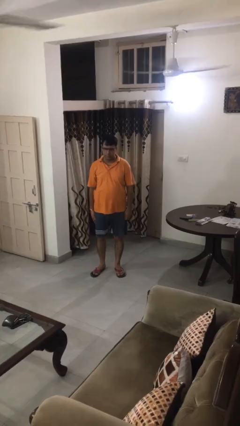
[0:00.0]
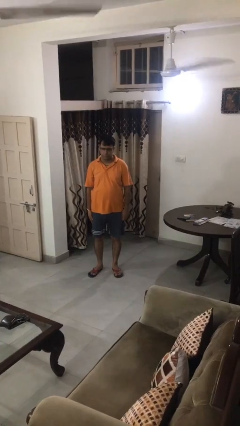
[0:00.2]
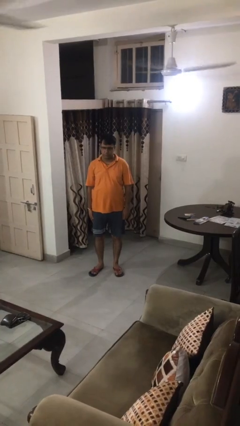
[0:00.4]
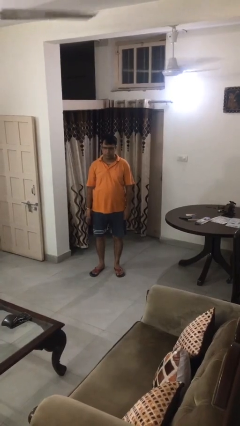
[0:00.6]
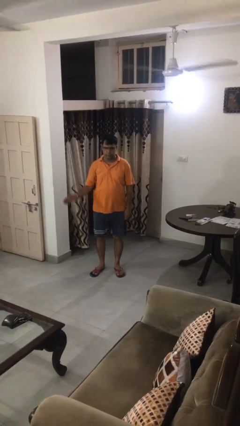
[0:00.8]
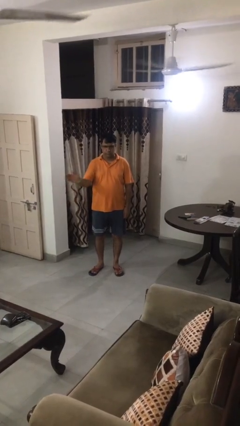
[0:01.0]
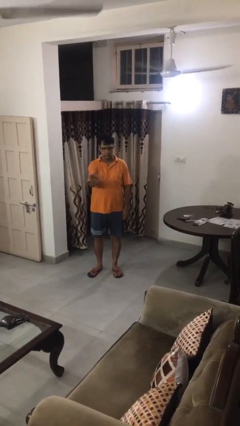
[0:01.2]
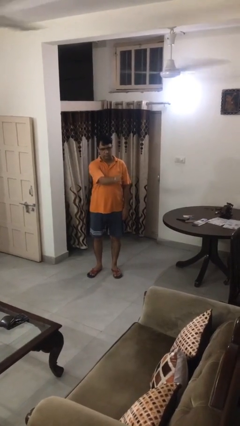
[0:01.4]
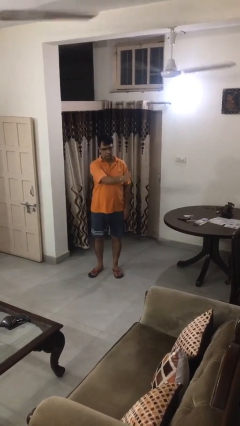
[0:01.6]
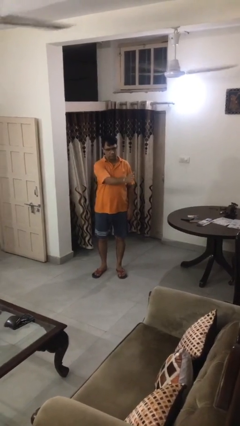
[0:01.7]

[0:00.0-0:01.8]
person gestures swipe left

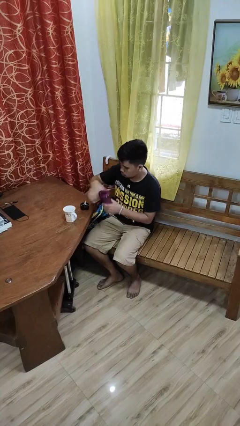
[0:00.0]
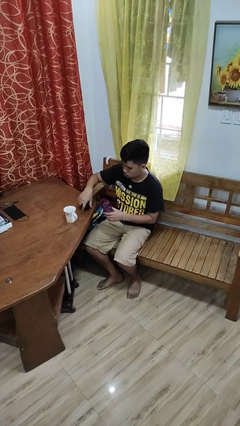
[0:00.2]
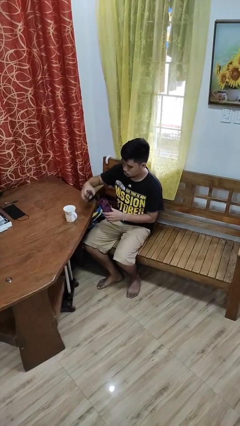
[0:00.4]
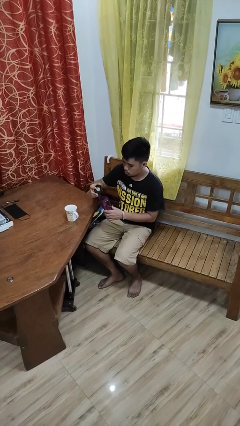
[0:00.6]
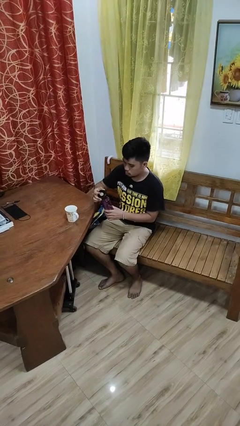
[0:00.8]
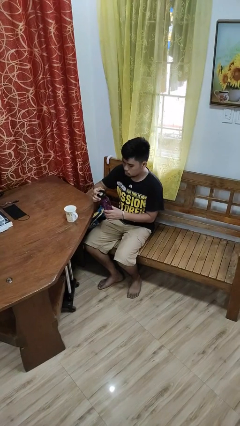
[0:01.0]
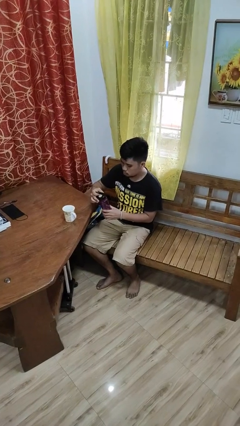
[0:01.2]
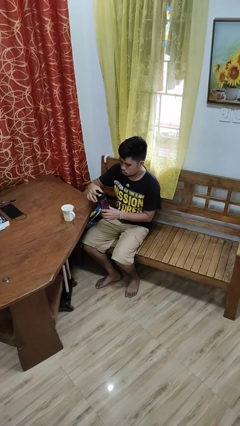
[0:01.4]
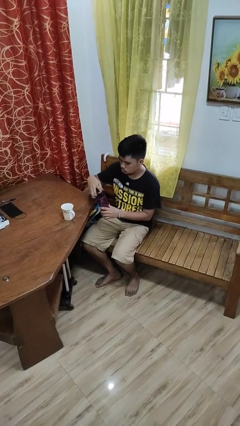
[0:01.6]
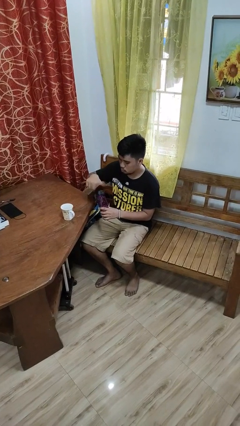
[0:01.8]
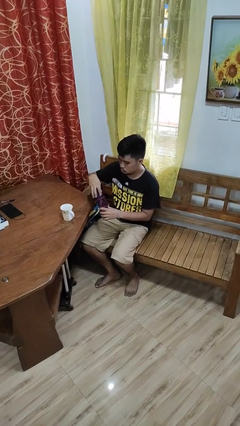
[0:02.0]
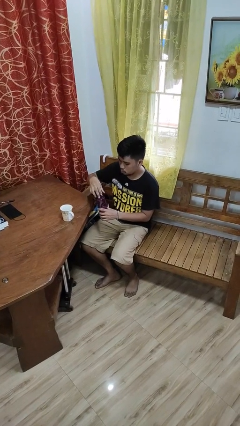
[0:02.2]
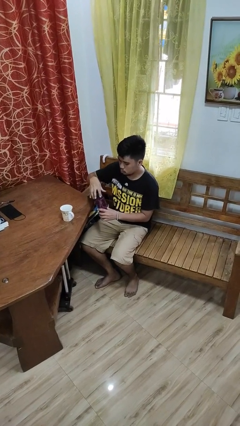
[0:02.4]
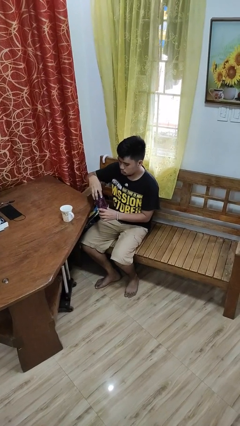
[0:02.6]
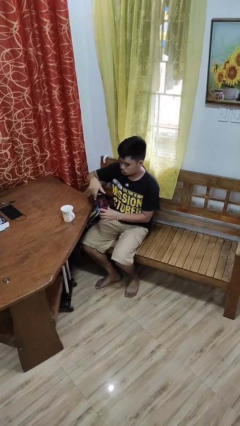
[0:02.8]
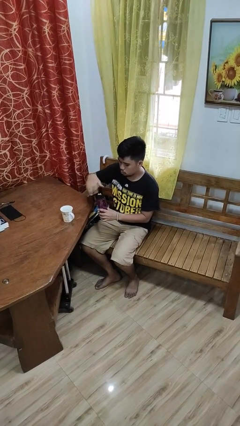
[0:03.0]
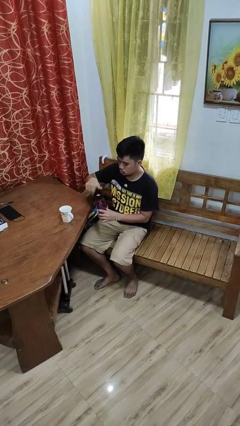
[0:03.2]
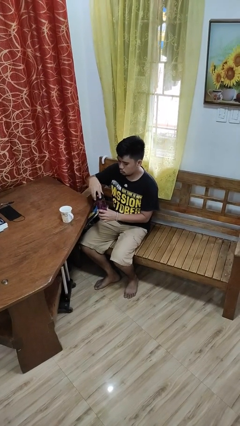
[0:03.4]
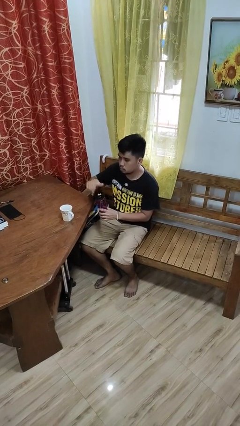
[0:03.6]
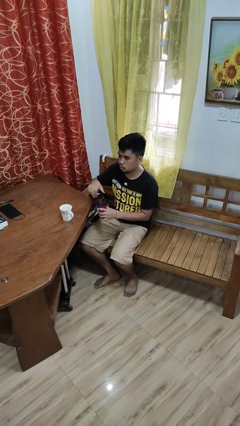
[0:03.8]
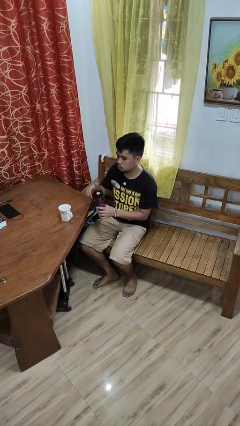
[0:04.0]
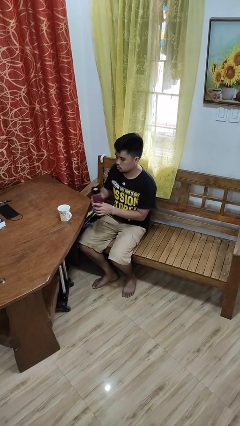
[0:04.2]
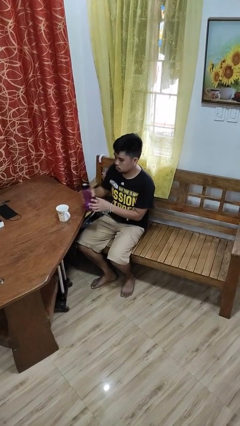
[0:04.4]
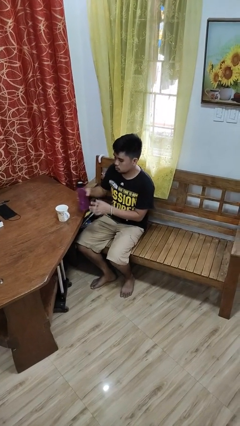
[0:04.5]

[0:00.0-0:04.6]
person screws lid to bottle

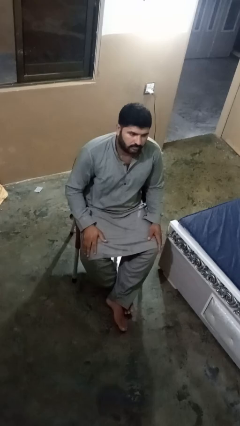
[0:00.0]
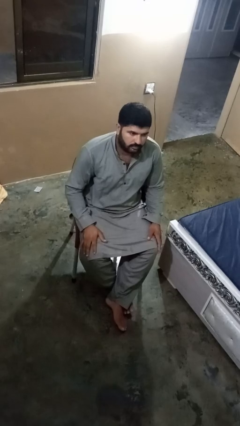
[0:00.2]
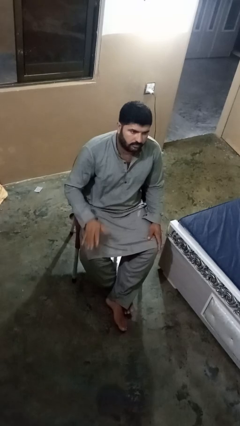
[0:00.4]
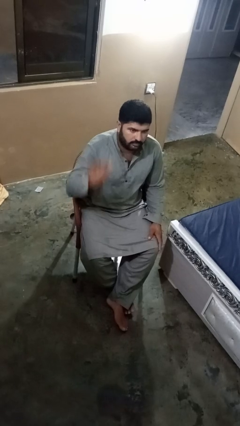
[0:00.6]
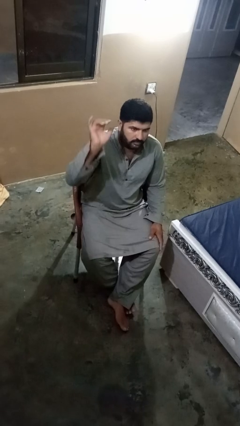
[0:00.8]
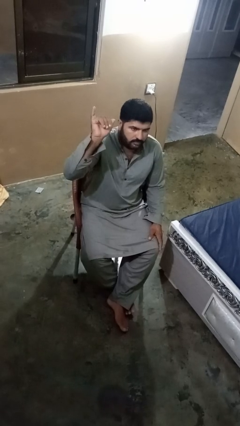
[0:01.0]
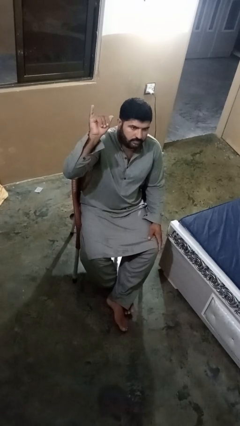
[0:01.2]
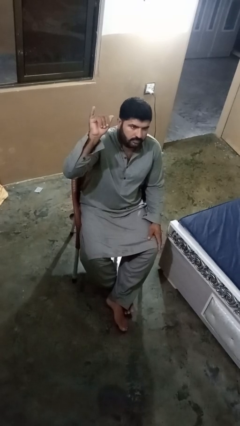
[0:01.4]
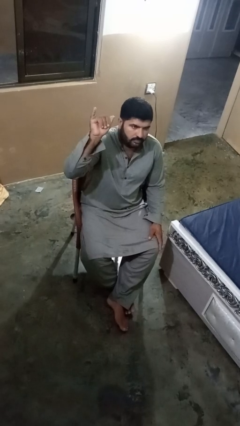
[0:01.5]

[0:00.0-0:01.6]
person gestures hang loose

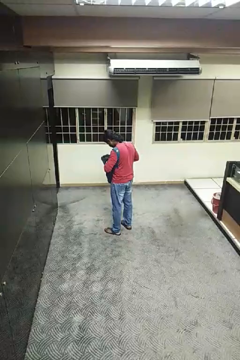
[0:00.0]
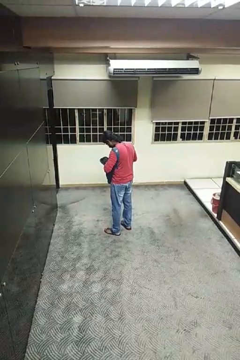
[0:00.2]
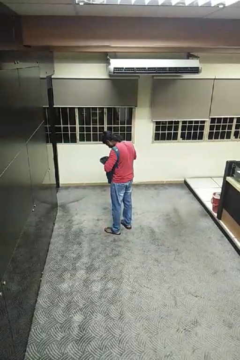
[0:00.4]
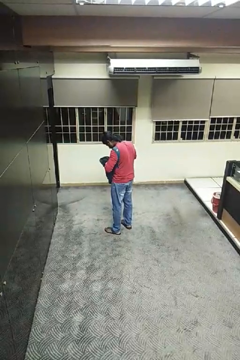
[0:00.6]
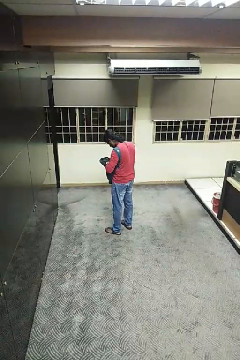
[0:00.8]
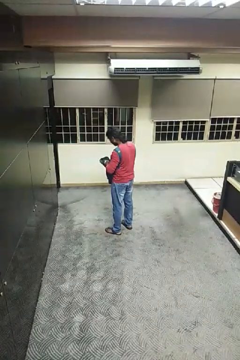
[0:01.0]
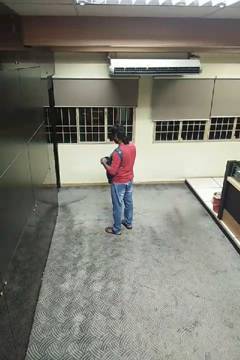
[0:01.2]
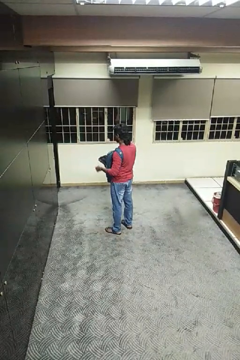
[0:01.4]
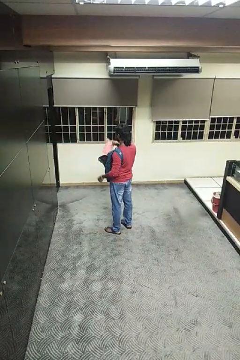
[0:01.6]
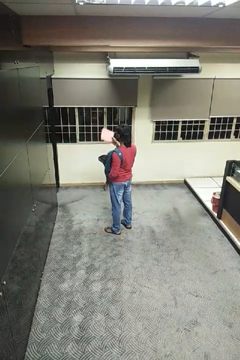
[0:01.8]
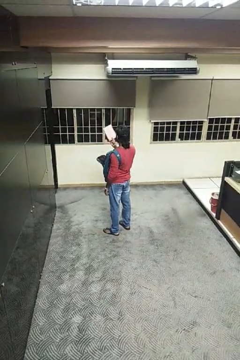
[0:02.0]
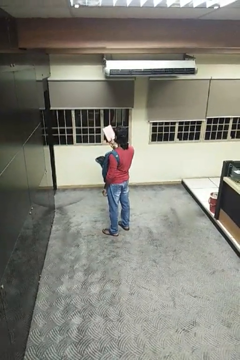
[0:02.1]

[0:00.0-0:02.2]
person takes object from backpack

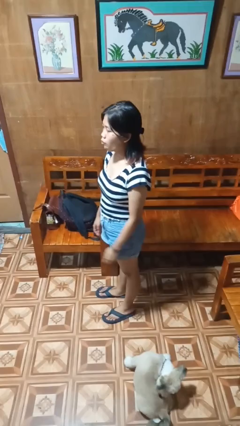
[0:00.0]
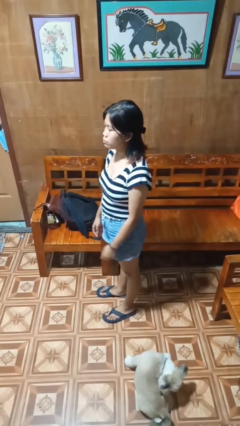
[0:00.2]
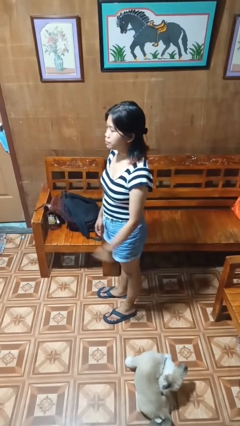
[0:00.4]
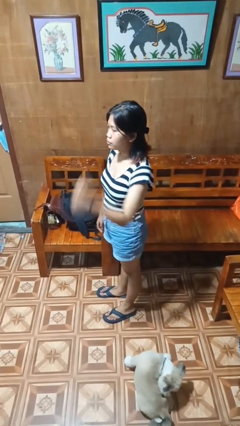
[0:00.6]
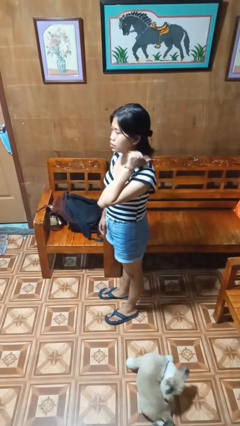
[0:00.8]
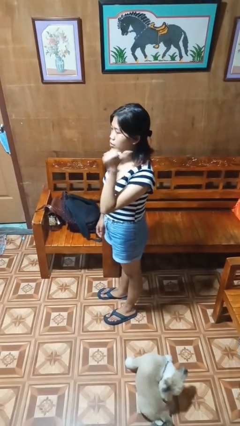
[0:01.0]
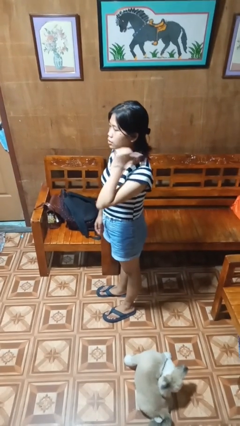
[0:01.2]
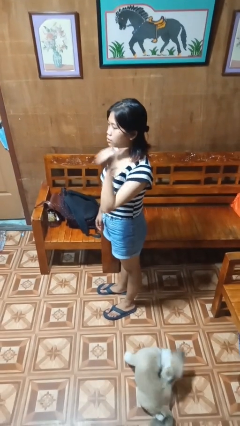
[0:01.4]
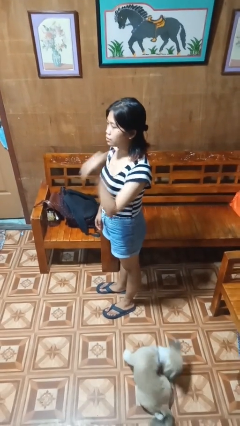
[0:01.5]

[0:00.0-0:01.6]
person gestures behind me

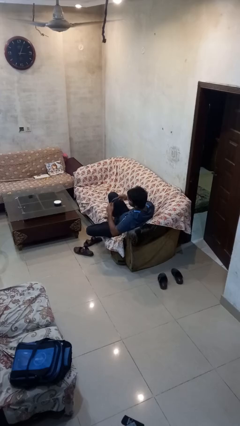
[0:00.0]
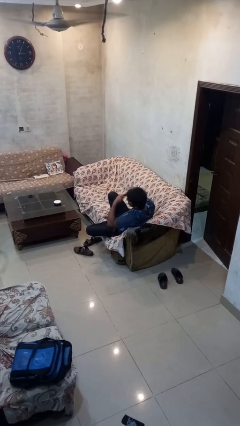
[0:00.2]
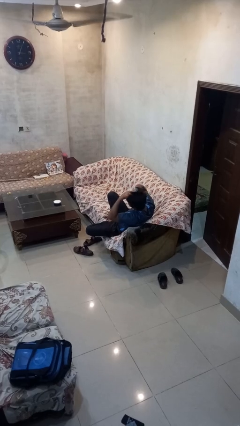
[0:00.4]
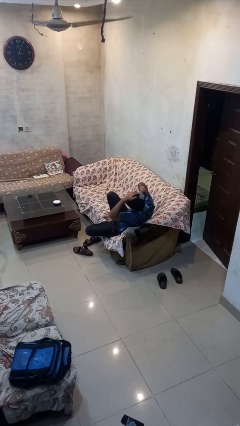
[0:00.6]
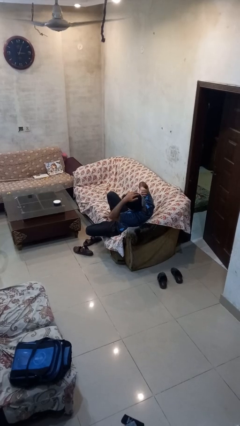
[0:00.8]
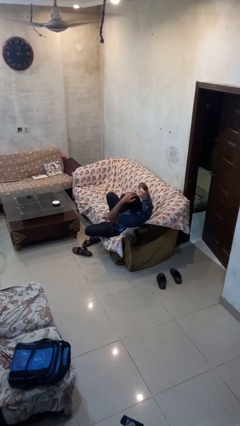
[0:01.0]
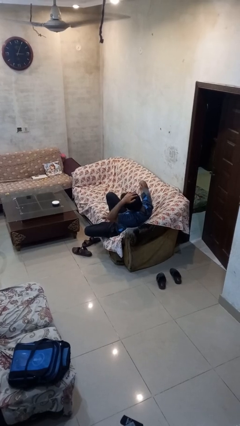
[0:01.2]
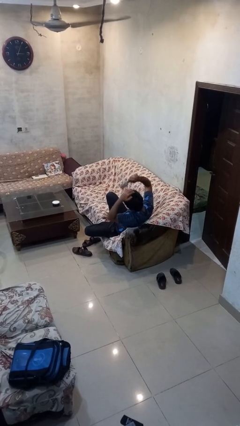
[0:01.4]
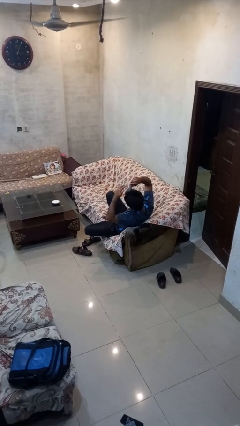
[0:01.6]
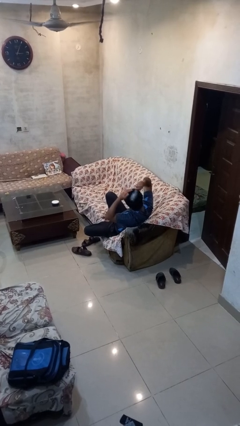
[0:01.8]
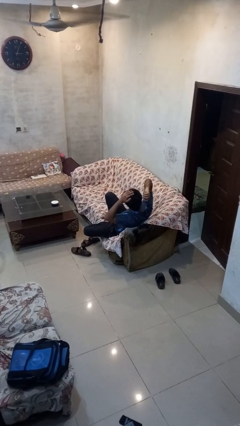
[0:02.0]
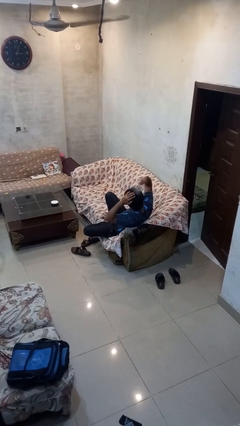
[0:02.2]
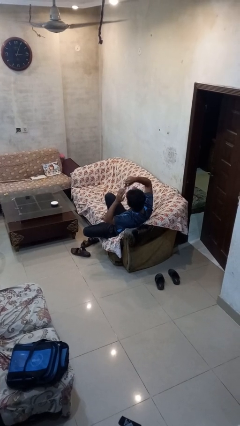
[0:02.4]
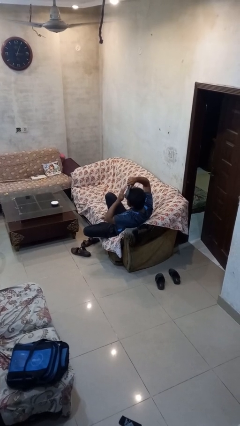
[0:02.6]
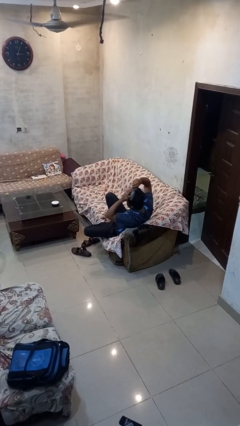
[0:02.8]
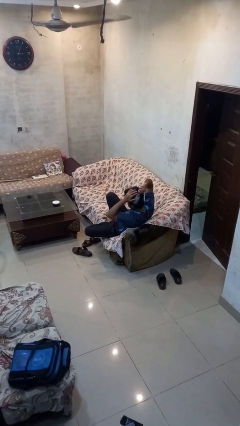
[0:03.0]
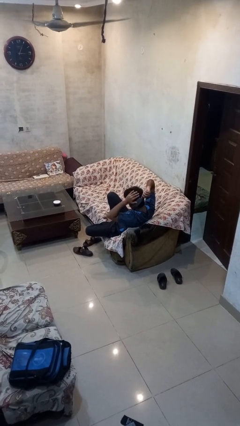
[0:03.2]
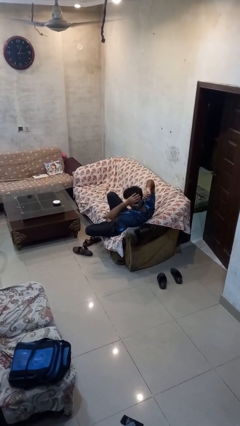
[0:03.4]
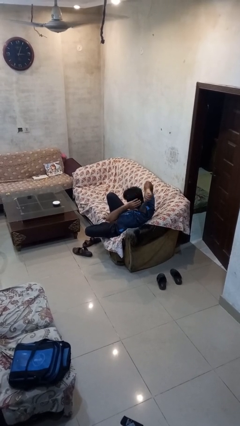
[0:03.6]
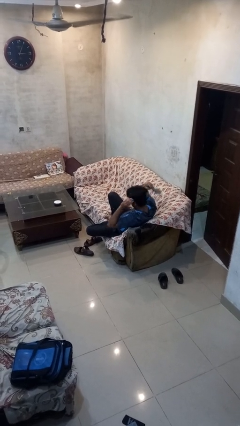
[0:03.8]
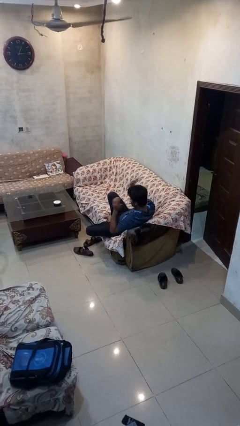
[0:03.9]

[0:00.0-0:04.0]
person brushes hair

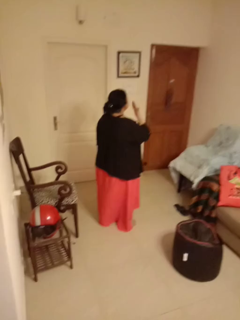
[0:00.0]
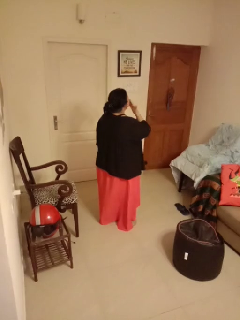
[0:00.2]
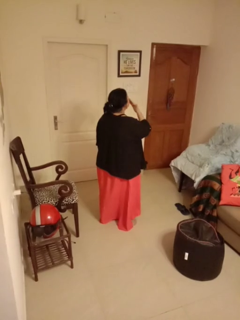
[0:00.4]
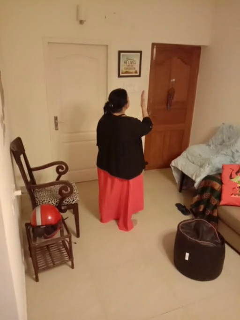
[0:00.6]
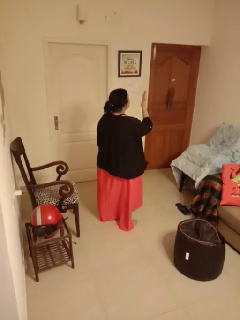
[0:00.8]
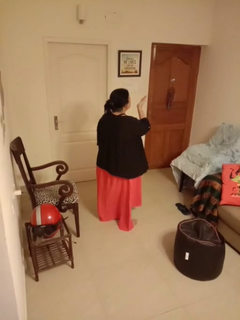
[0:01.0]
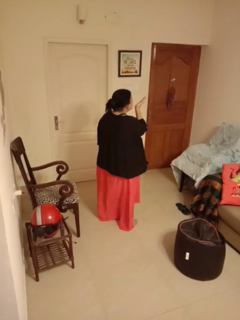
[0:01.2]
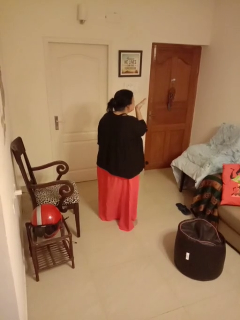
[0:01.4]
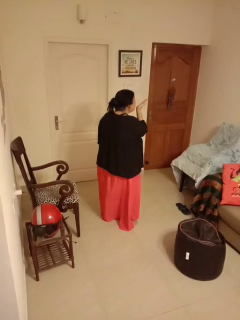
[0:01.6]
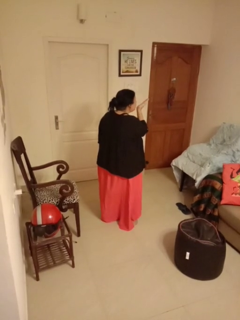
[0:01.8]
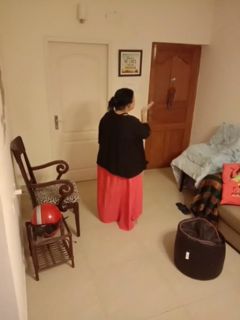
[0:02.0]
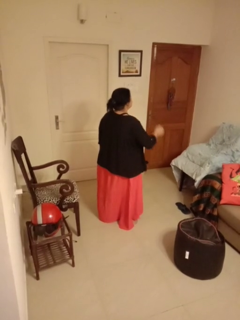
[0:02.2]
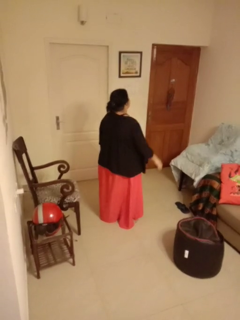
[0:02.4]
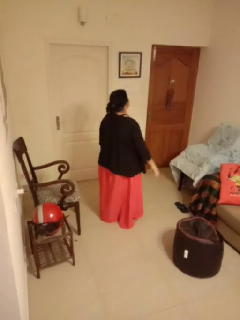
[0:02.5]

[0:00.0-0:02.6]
person gestures blow kiss
